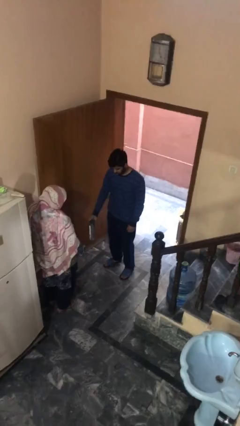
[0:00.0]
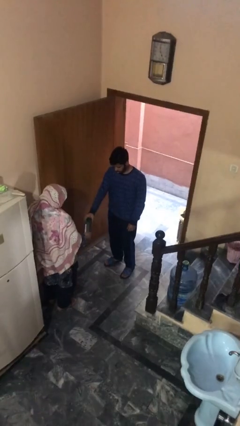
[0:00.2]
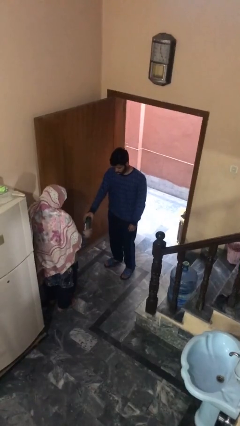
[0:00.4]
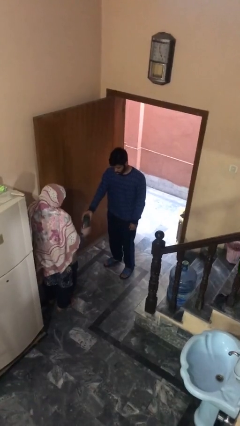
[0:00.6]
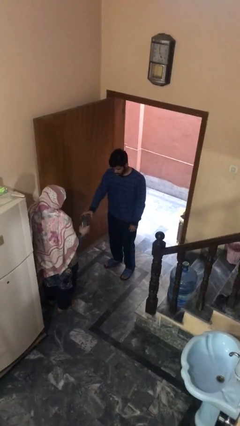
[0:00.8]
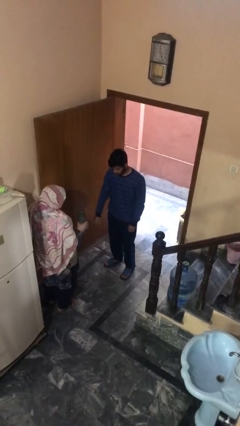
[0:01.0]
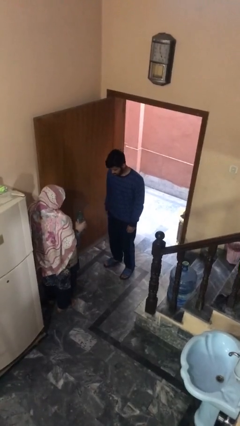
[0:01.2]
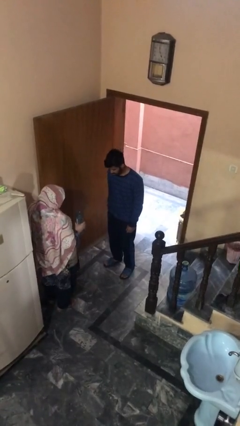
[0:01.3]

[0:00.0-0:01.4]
person transfers object to person

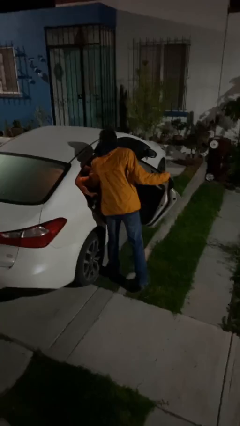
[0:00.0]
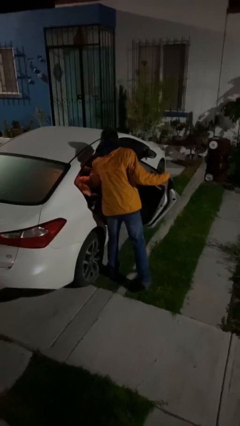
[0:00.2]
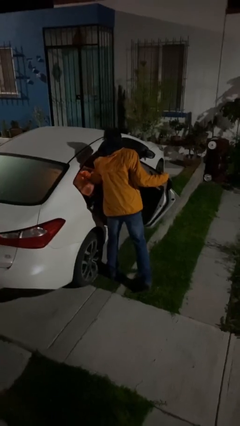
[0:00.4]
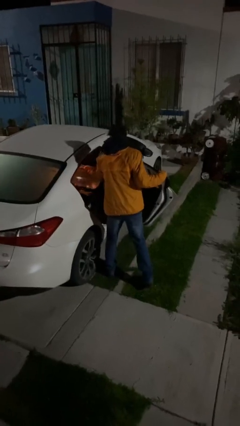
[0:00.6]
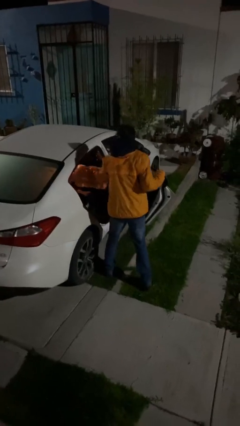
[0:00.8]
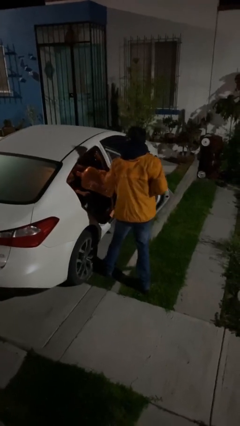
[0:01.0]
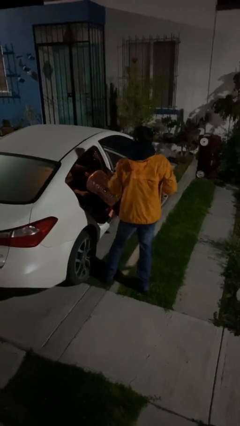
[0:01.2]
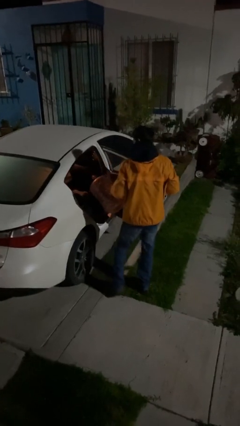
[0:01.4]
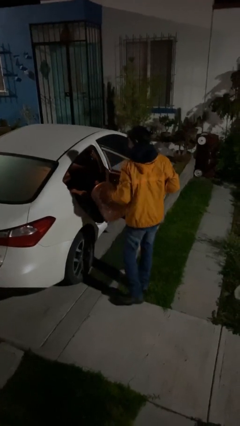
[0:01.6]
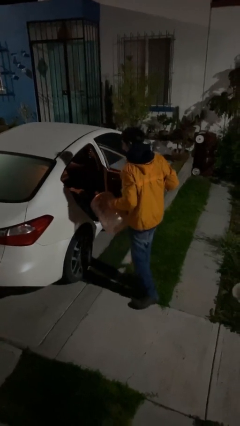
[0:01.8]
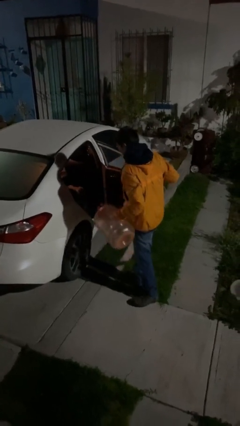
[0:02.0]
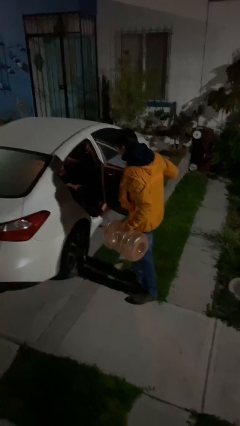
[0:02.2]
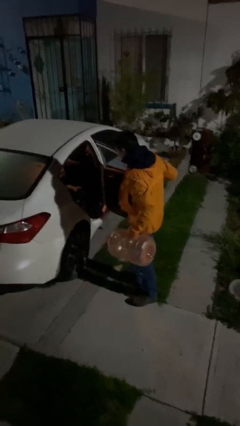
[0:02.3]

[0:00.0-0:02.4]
person unloads car

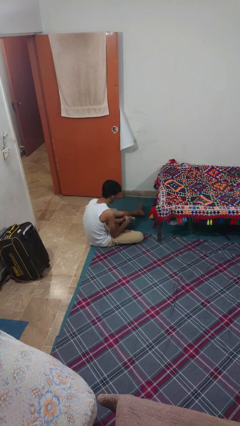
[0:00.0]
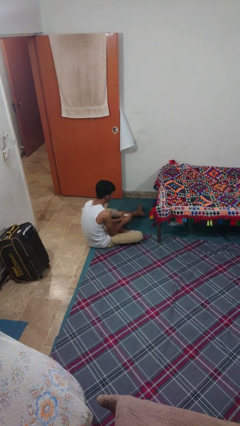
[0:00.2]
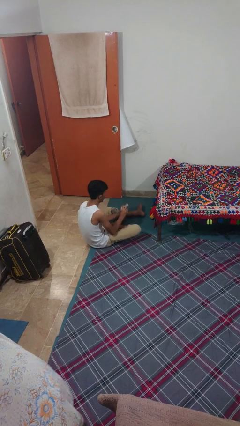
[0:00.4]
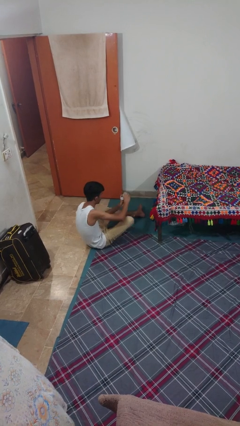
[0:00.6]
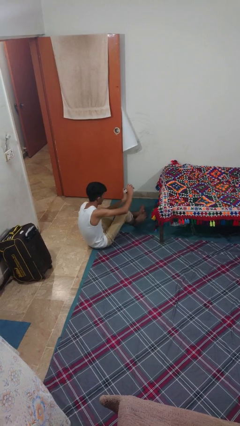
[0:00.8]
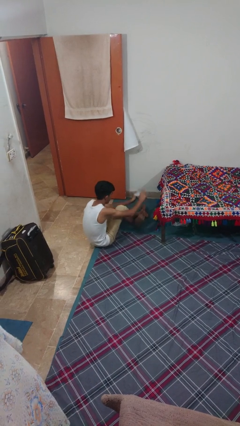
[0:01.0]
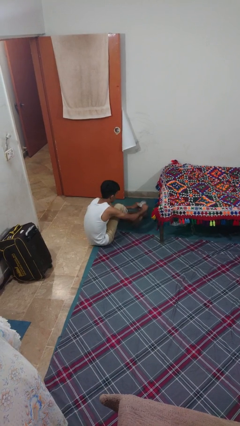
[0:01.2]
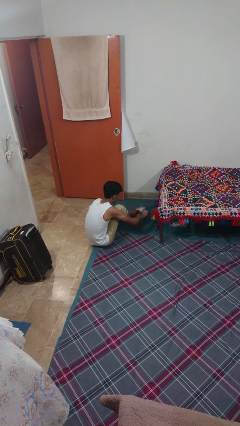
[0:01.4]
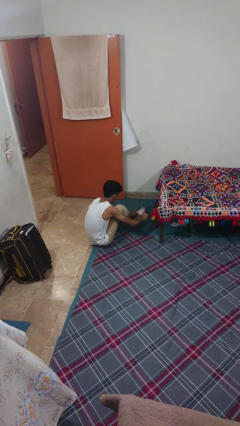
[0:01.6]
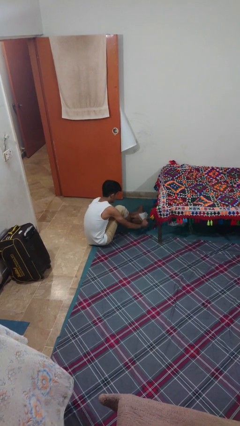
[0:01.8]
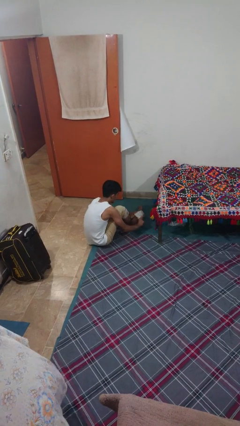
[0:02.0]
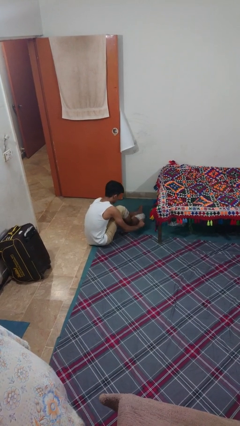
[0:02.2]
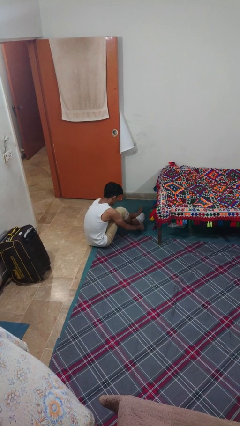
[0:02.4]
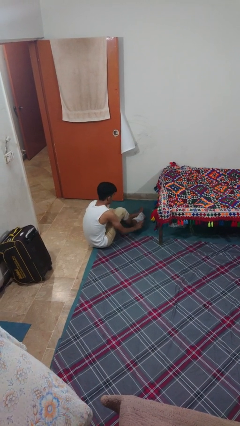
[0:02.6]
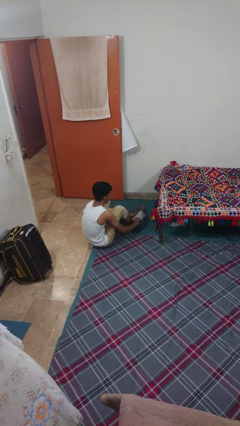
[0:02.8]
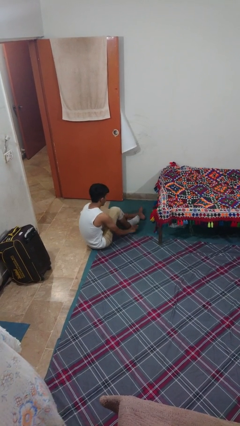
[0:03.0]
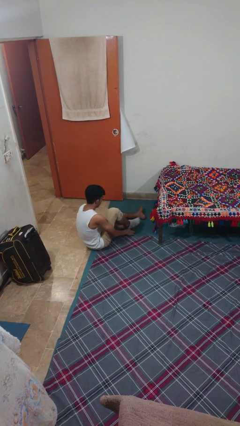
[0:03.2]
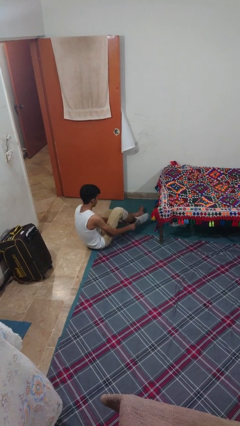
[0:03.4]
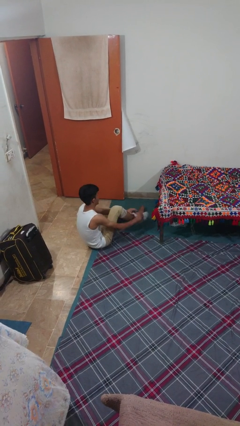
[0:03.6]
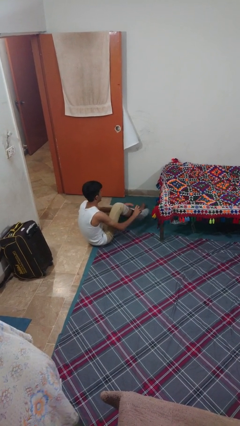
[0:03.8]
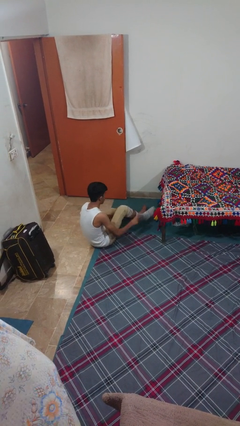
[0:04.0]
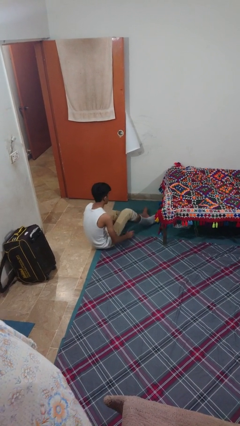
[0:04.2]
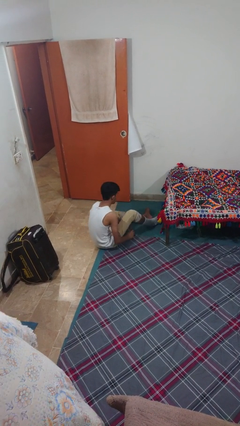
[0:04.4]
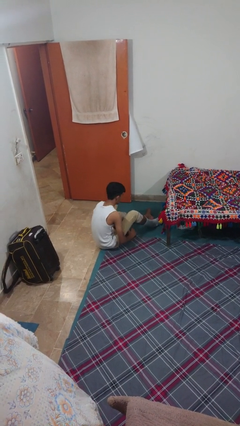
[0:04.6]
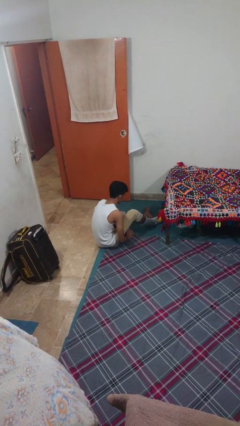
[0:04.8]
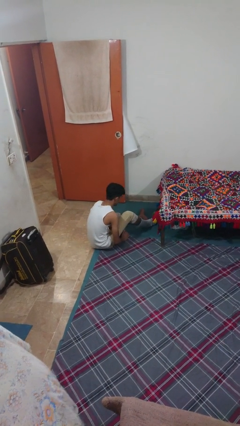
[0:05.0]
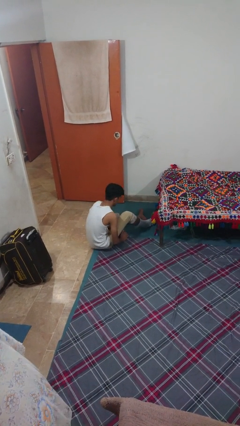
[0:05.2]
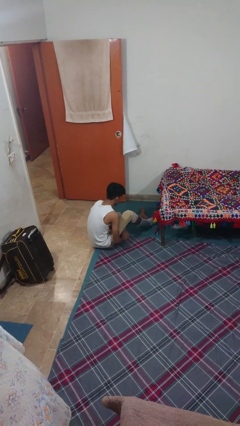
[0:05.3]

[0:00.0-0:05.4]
person puts on socks

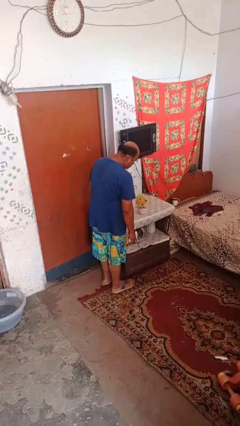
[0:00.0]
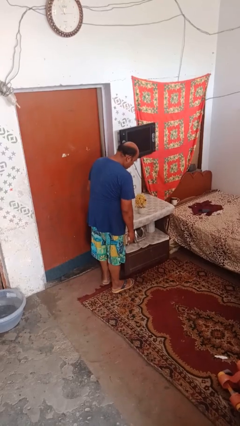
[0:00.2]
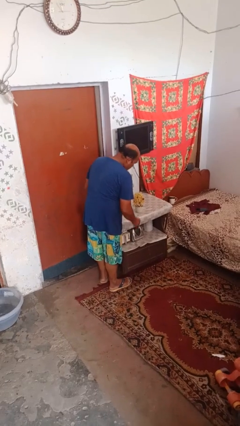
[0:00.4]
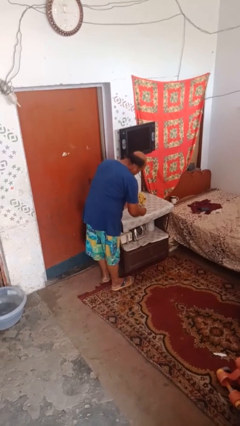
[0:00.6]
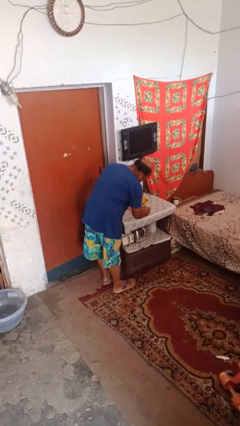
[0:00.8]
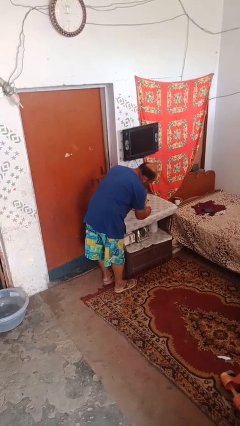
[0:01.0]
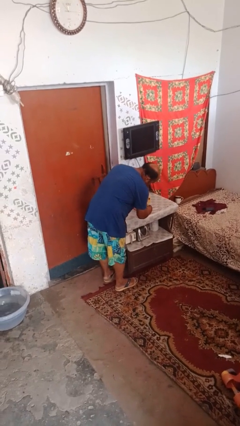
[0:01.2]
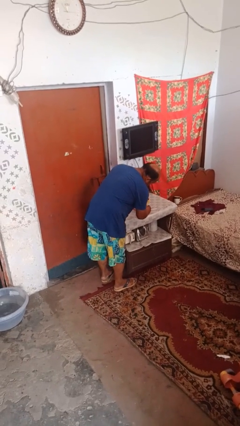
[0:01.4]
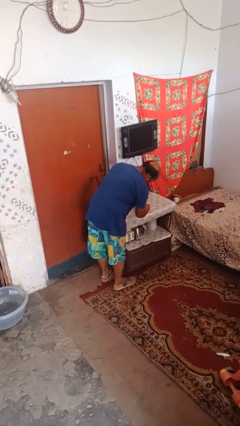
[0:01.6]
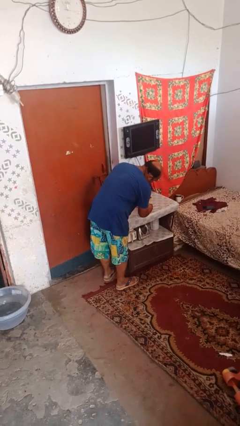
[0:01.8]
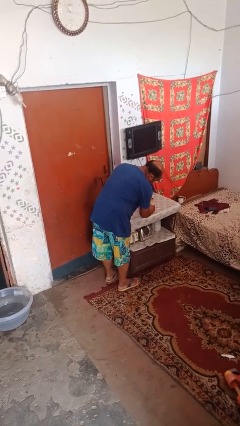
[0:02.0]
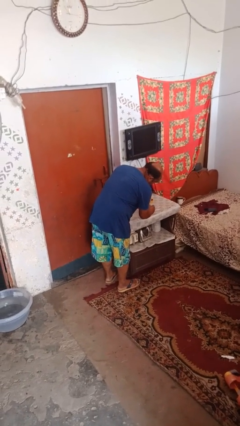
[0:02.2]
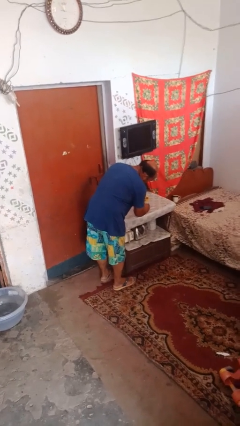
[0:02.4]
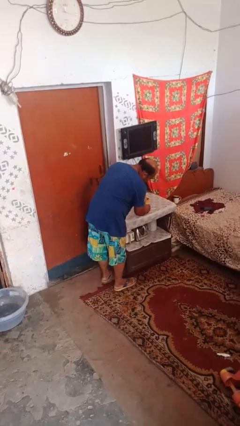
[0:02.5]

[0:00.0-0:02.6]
person arranges flowers in vase

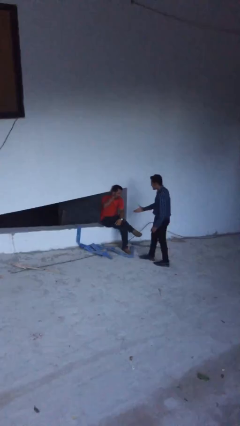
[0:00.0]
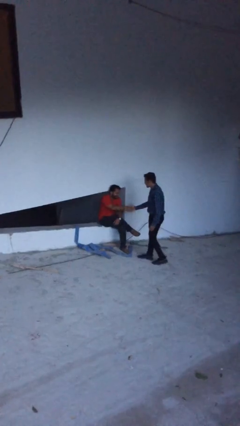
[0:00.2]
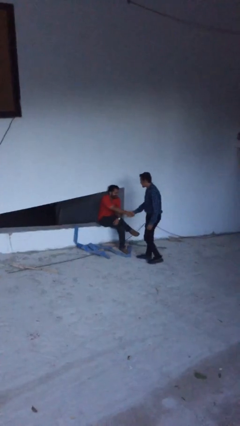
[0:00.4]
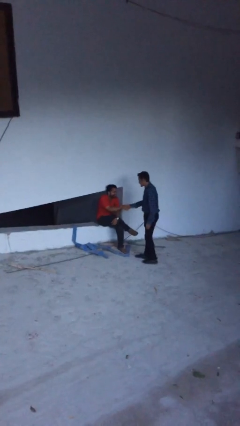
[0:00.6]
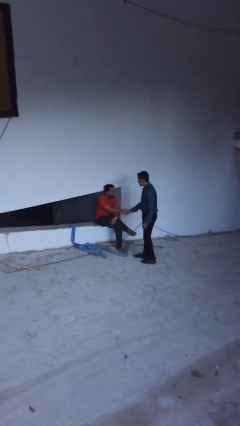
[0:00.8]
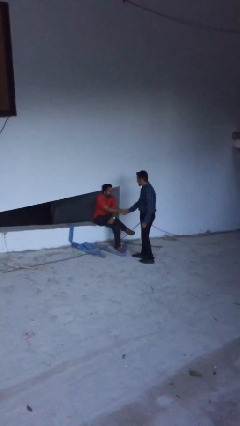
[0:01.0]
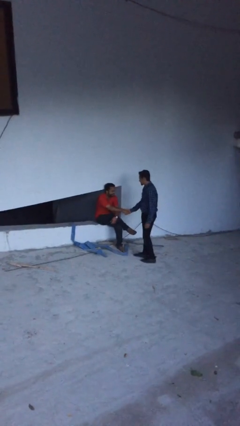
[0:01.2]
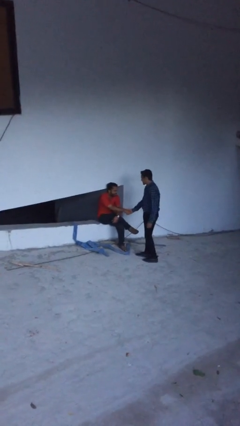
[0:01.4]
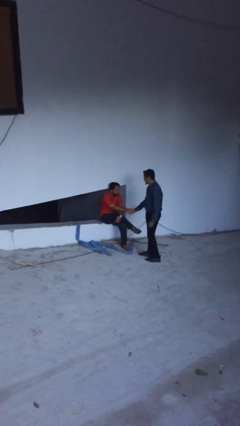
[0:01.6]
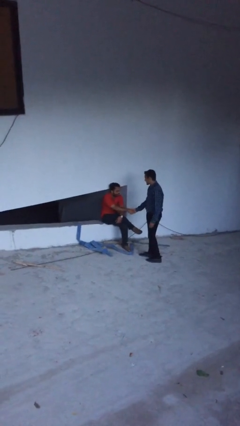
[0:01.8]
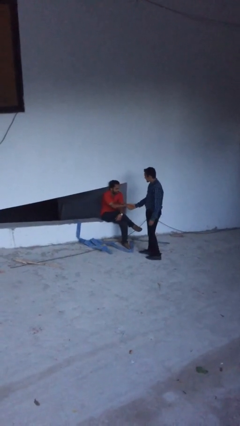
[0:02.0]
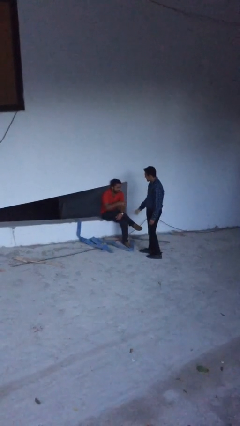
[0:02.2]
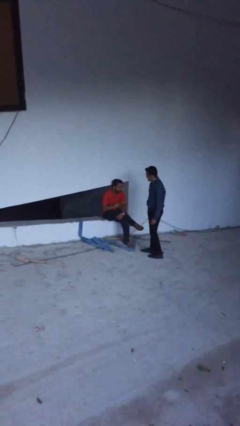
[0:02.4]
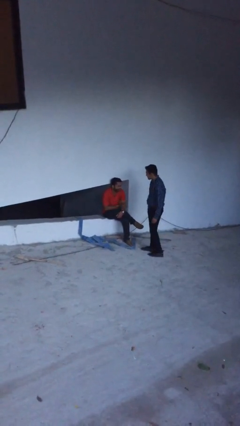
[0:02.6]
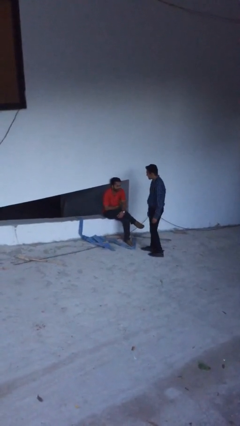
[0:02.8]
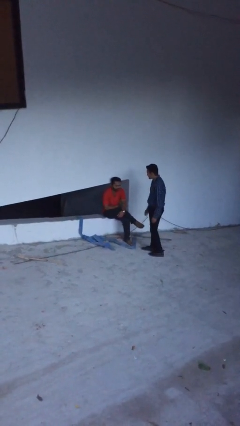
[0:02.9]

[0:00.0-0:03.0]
person shakes hand

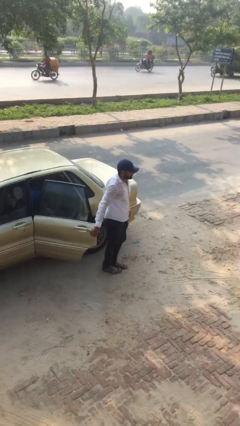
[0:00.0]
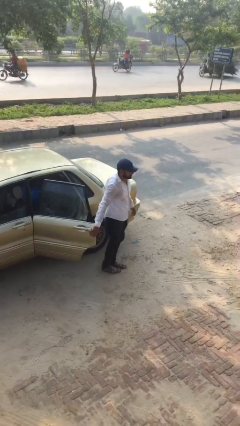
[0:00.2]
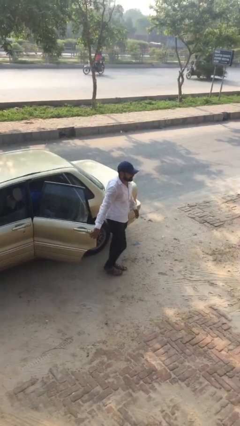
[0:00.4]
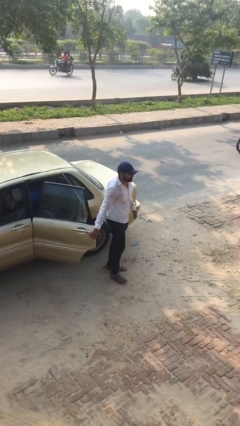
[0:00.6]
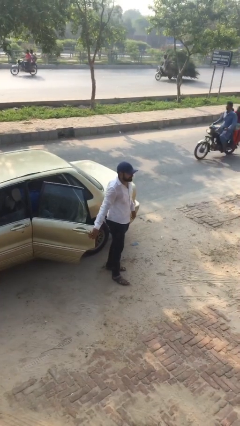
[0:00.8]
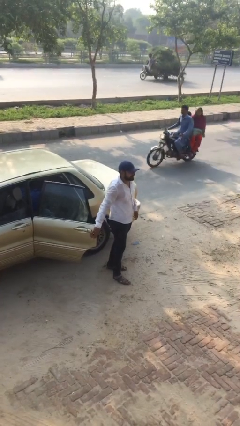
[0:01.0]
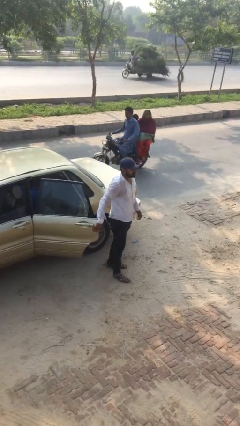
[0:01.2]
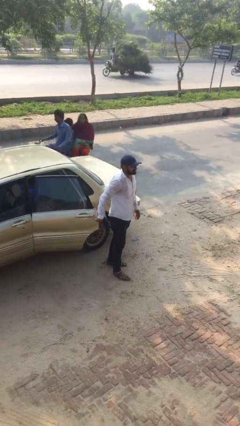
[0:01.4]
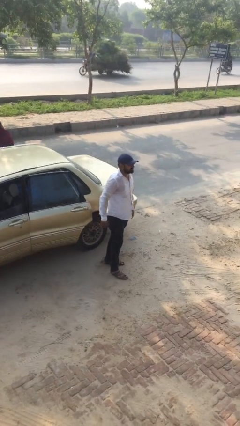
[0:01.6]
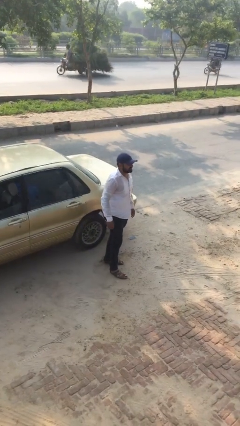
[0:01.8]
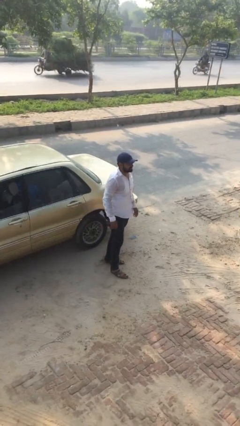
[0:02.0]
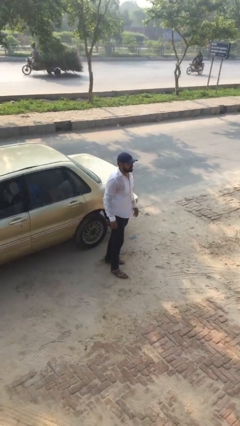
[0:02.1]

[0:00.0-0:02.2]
person closes car door

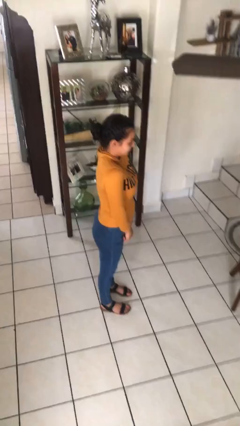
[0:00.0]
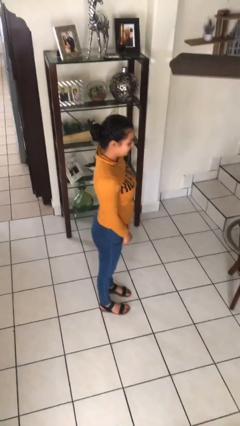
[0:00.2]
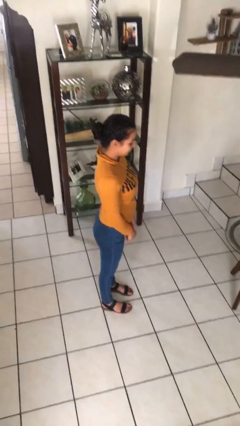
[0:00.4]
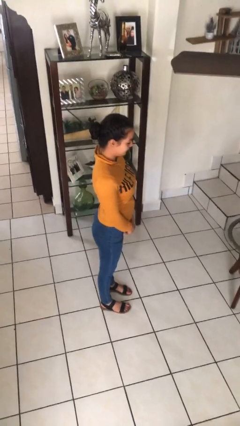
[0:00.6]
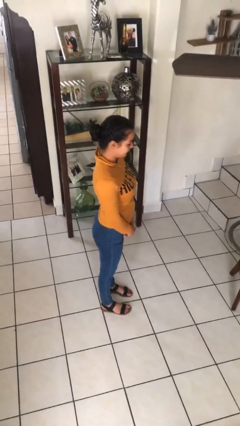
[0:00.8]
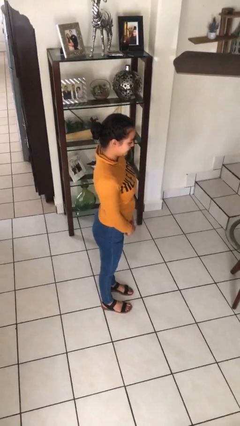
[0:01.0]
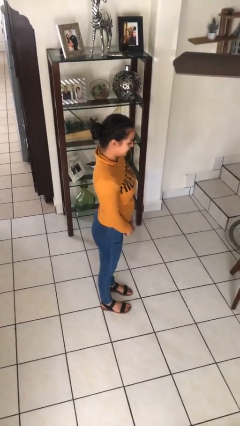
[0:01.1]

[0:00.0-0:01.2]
person shrugs
